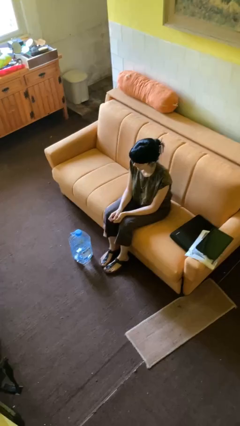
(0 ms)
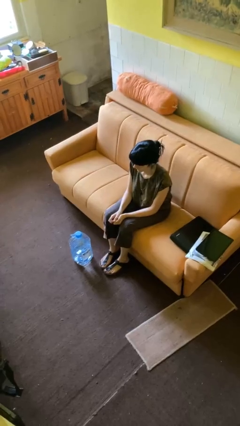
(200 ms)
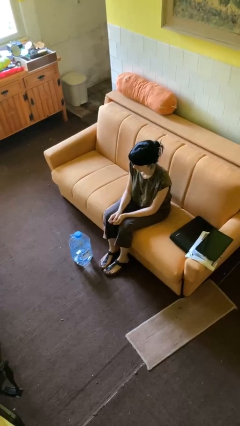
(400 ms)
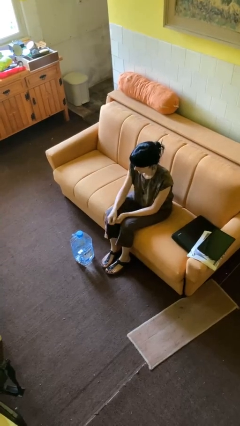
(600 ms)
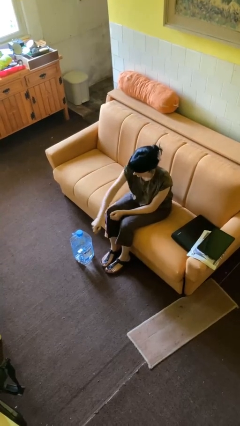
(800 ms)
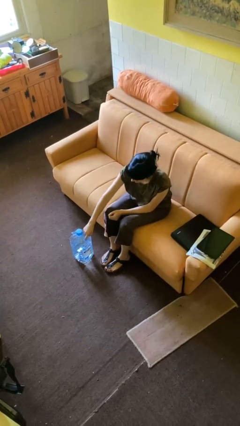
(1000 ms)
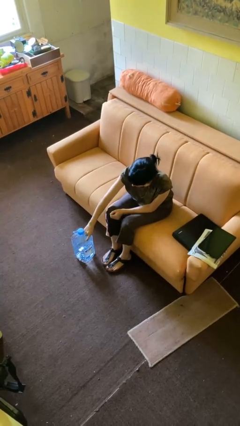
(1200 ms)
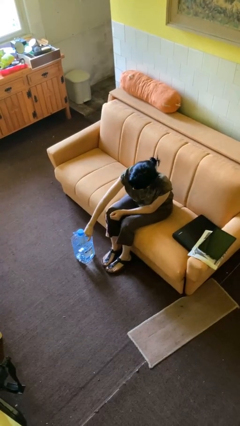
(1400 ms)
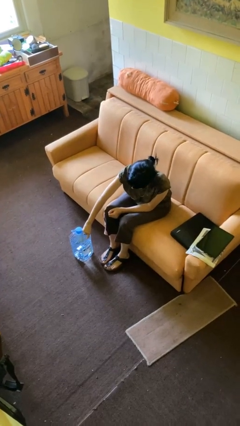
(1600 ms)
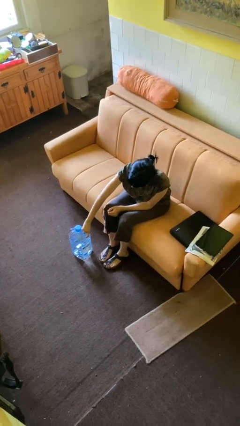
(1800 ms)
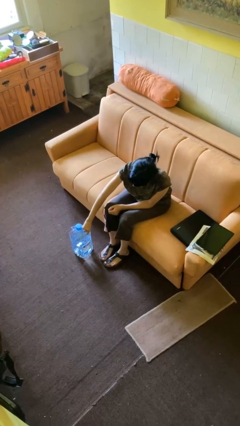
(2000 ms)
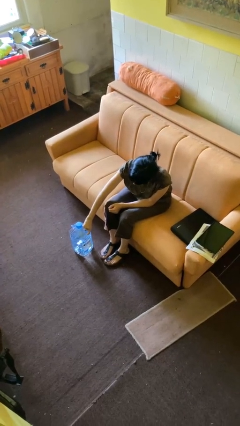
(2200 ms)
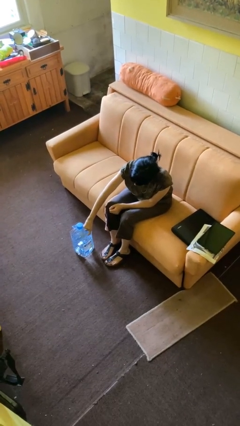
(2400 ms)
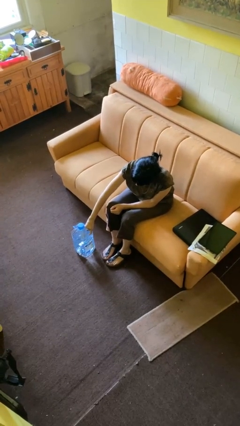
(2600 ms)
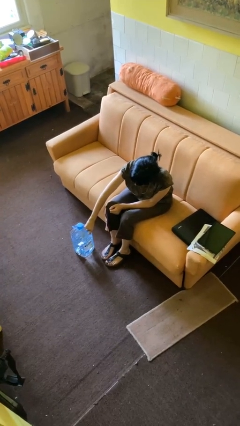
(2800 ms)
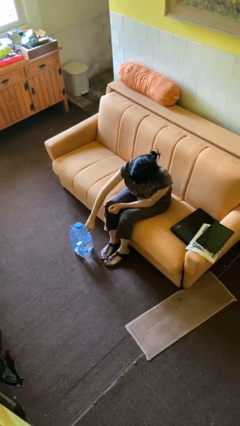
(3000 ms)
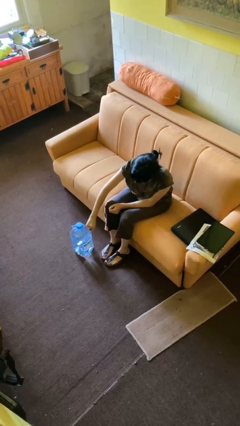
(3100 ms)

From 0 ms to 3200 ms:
person taps object with finger

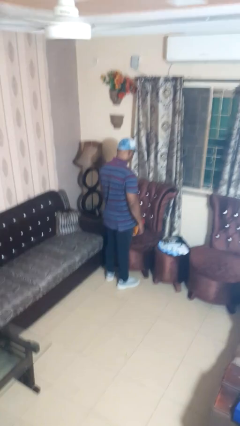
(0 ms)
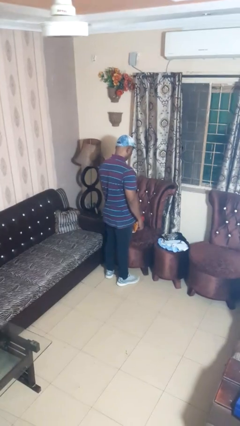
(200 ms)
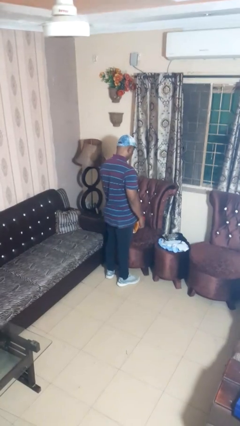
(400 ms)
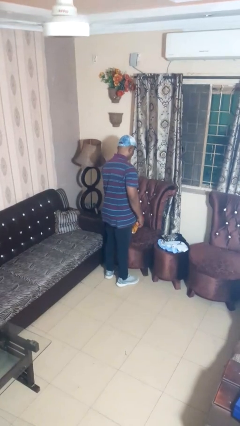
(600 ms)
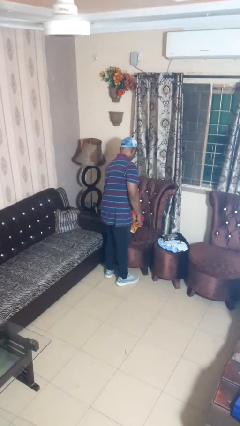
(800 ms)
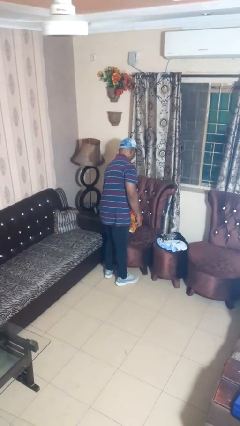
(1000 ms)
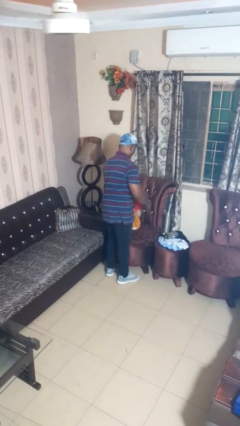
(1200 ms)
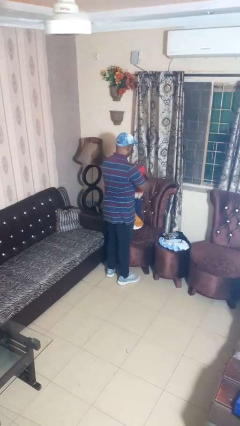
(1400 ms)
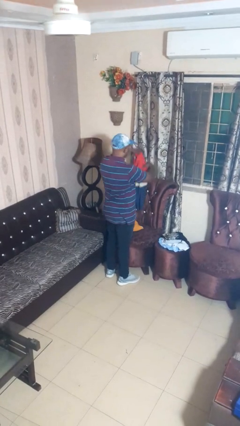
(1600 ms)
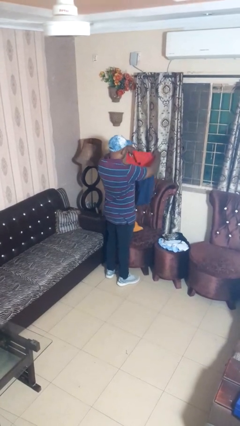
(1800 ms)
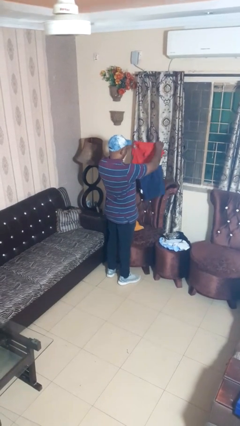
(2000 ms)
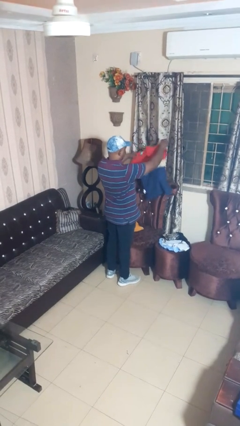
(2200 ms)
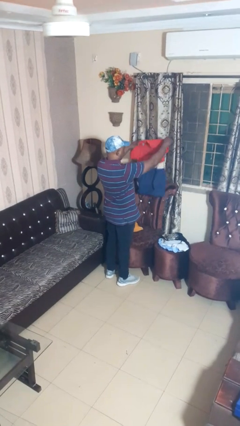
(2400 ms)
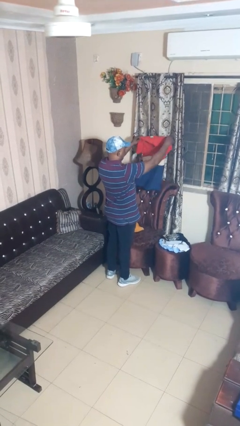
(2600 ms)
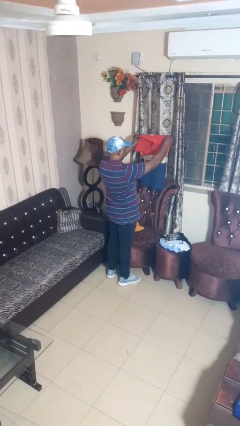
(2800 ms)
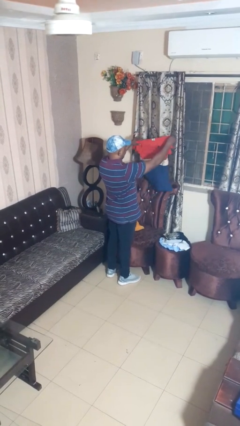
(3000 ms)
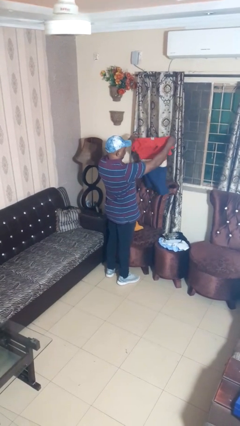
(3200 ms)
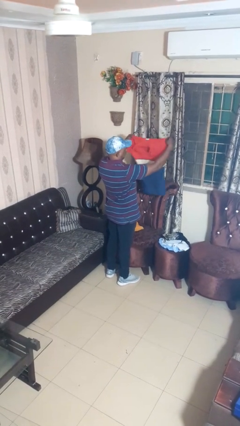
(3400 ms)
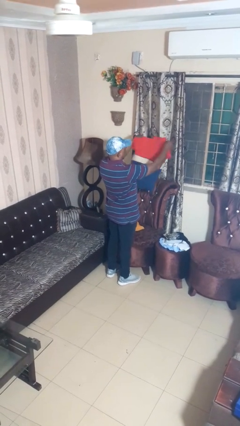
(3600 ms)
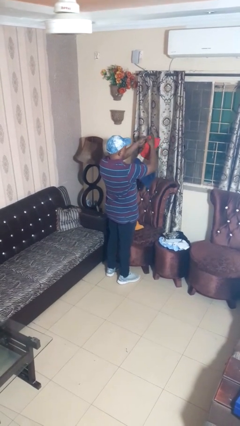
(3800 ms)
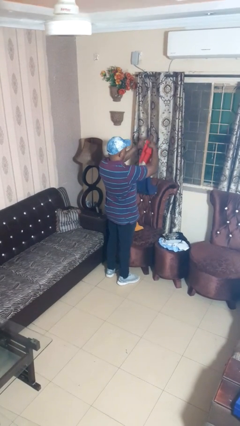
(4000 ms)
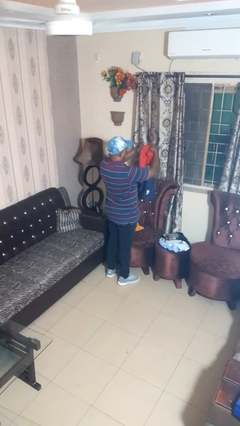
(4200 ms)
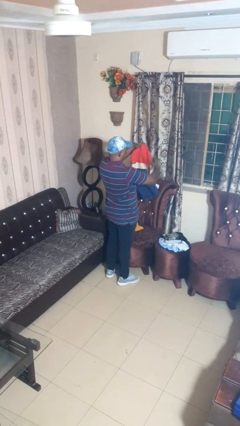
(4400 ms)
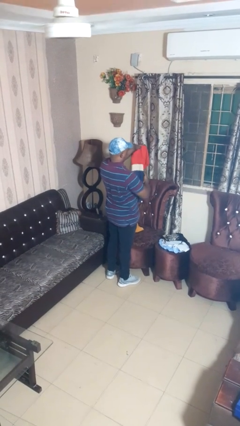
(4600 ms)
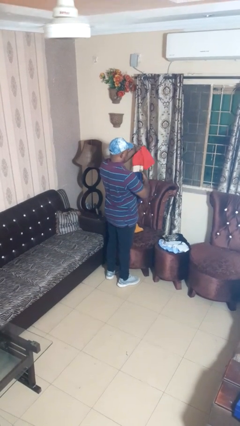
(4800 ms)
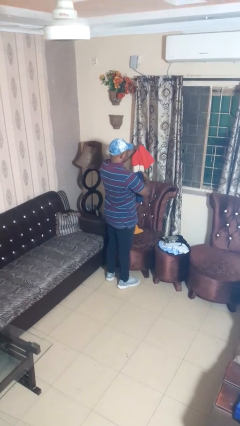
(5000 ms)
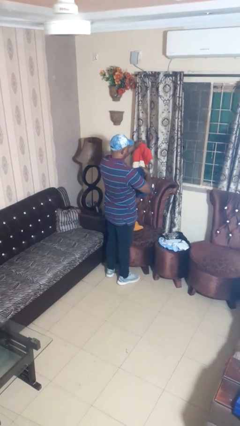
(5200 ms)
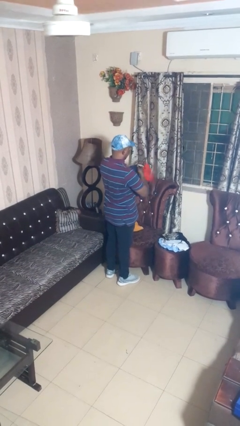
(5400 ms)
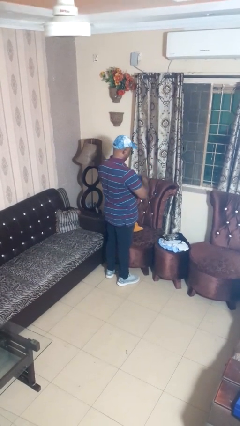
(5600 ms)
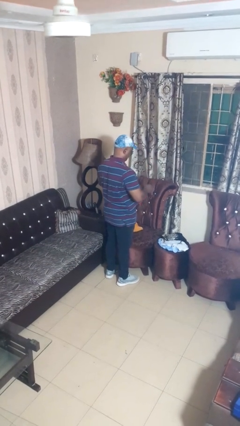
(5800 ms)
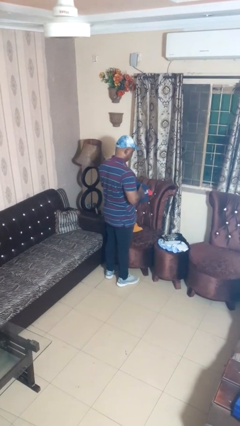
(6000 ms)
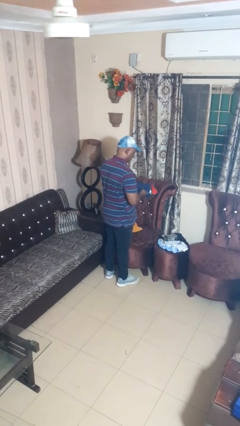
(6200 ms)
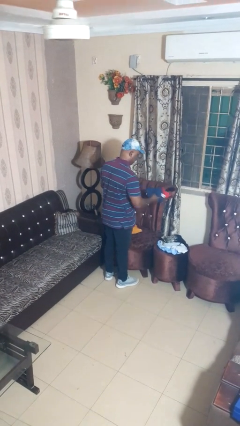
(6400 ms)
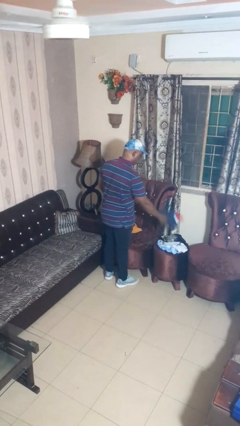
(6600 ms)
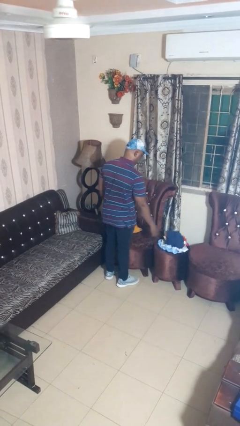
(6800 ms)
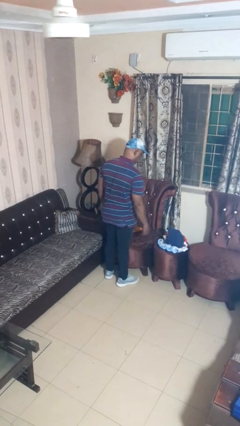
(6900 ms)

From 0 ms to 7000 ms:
person folds shirt

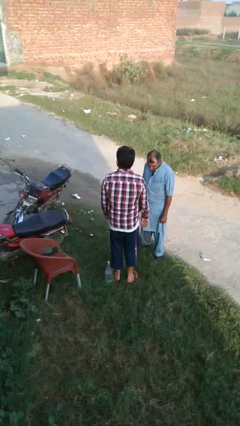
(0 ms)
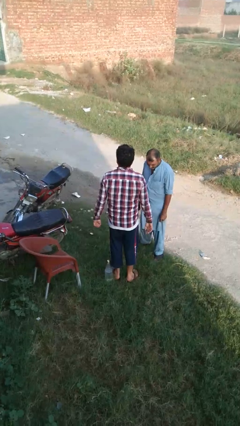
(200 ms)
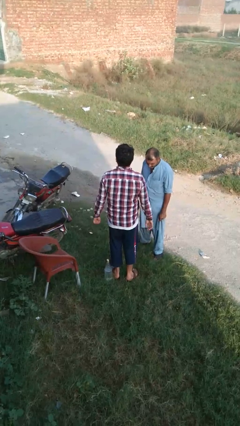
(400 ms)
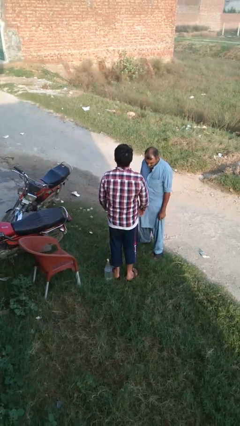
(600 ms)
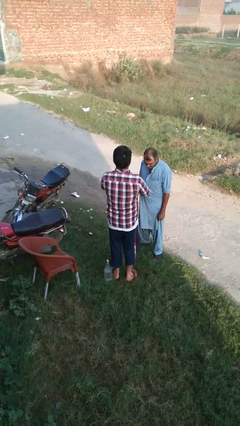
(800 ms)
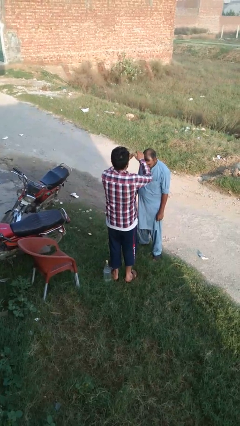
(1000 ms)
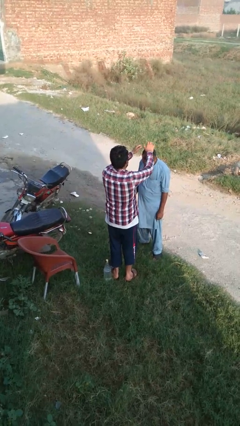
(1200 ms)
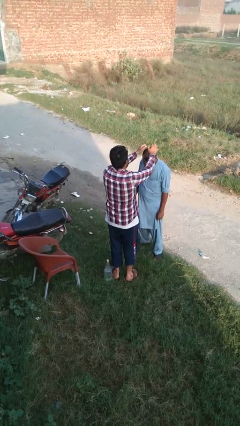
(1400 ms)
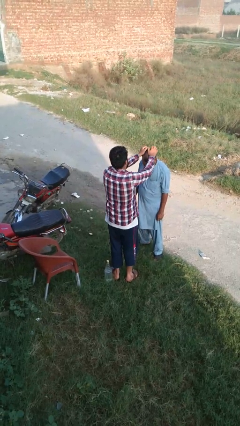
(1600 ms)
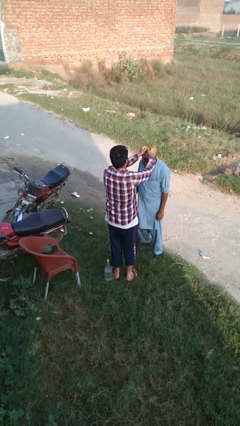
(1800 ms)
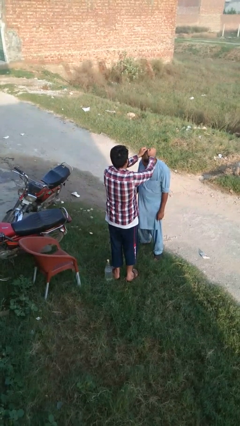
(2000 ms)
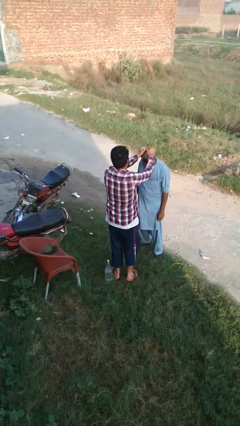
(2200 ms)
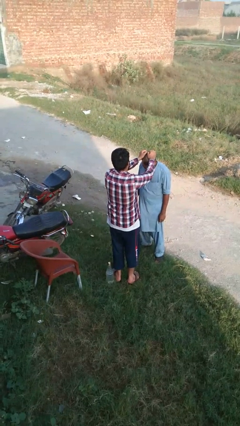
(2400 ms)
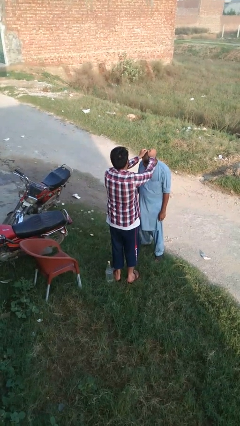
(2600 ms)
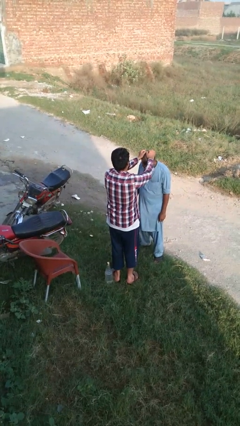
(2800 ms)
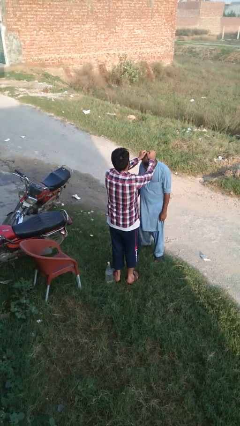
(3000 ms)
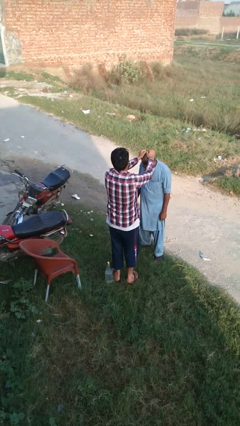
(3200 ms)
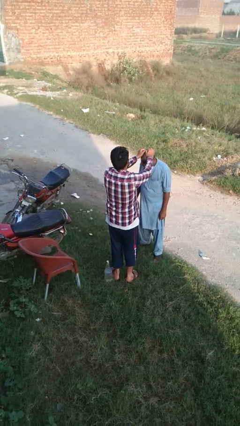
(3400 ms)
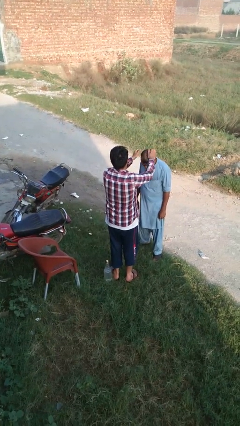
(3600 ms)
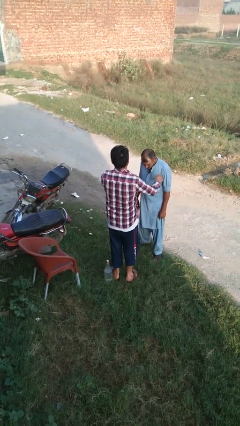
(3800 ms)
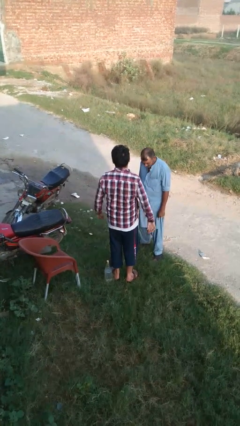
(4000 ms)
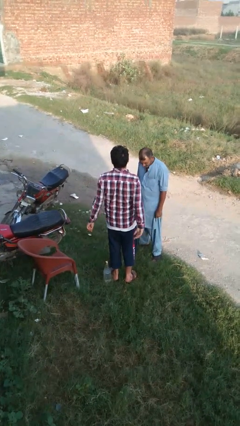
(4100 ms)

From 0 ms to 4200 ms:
person grabs person by hair

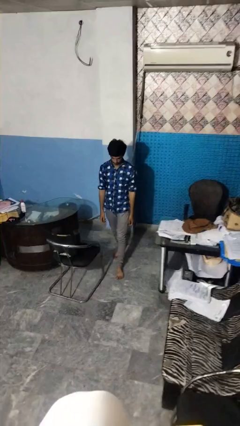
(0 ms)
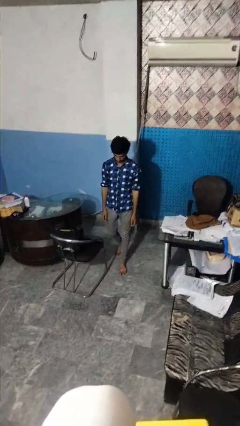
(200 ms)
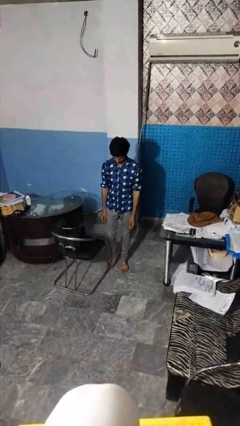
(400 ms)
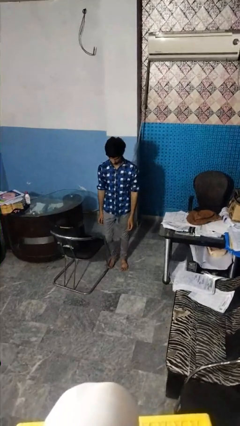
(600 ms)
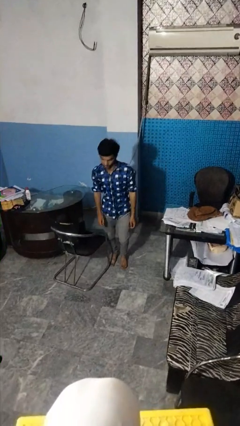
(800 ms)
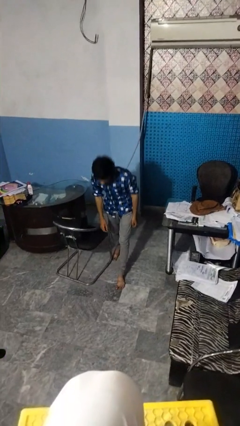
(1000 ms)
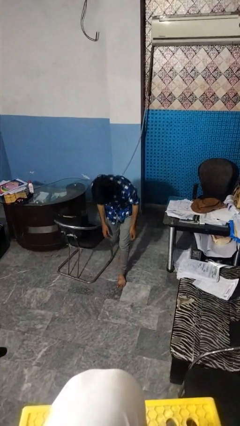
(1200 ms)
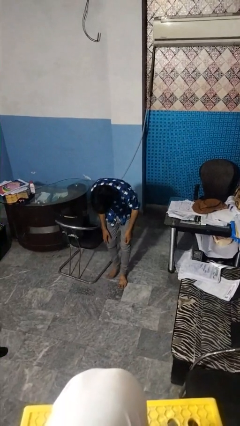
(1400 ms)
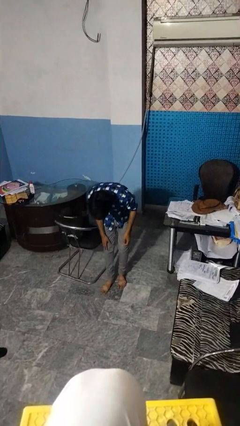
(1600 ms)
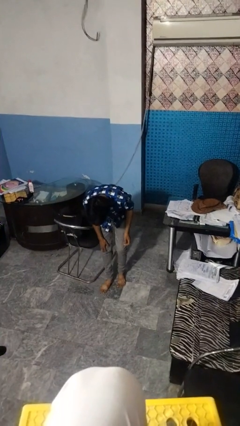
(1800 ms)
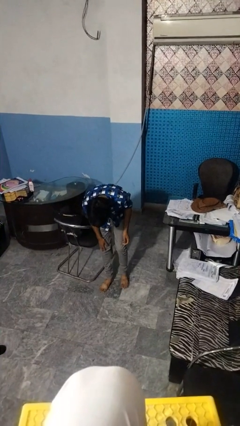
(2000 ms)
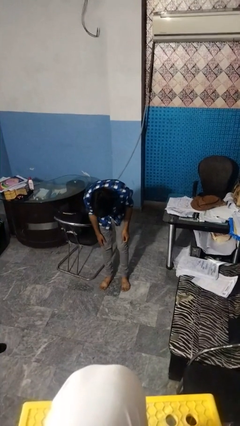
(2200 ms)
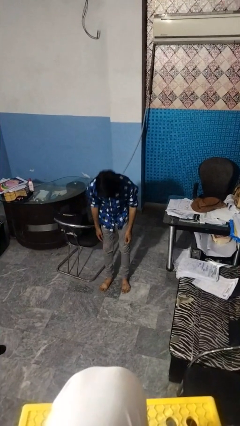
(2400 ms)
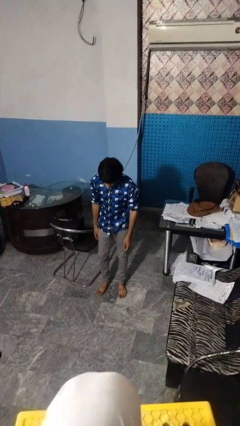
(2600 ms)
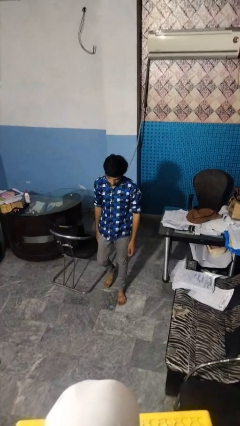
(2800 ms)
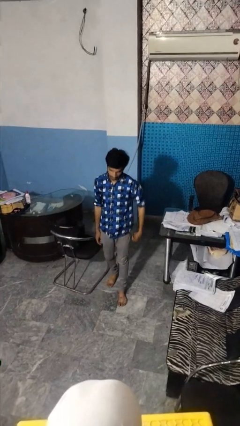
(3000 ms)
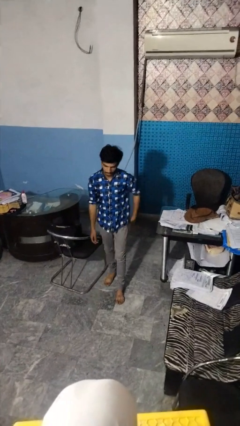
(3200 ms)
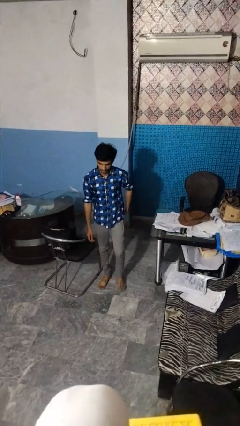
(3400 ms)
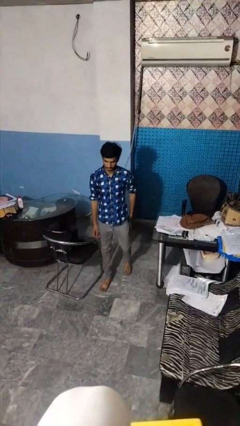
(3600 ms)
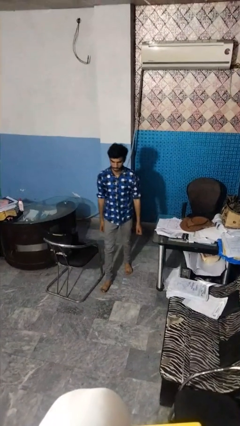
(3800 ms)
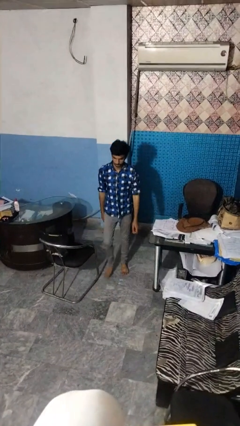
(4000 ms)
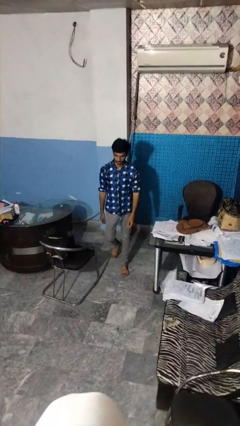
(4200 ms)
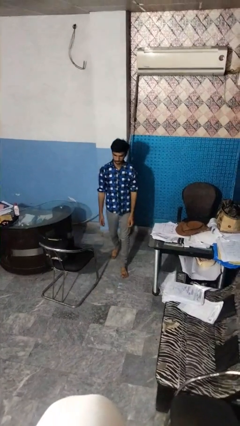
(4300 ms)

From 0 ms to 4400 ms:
person stubs toe
